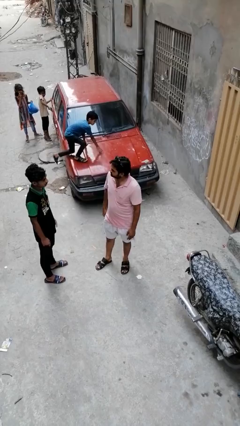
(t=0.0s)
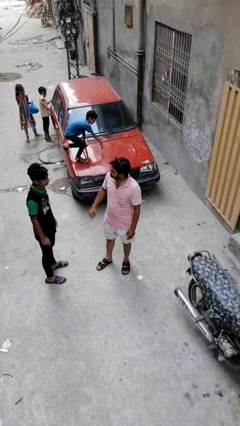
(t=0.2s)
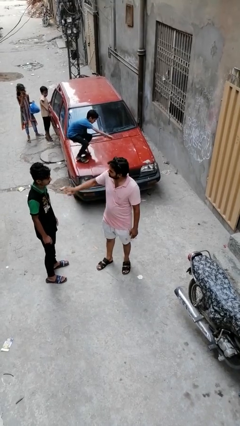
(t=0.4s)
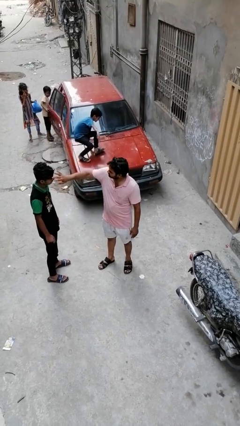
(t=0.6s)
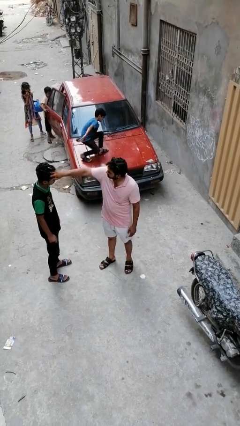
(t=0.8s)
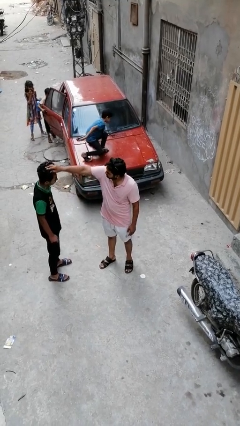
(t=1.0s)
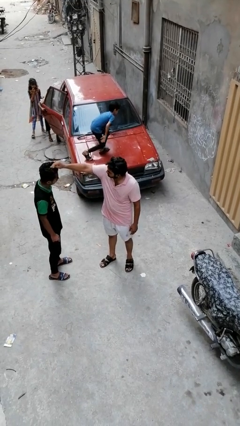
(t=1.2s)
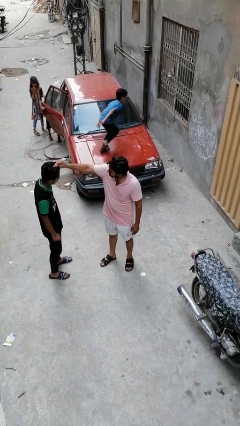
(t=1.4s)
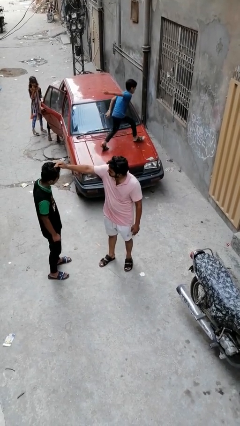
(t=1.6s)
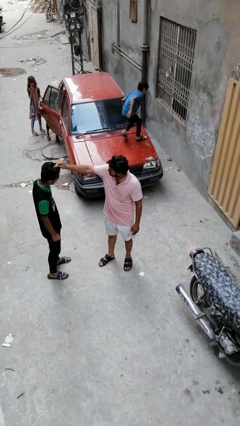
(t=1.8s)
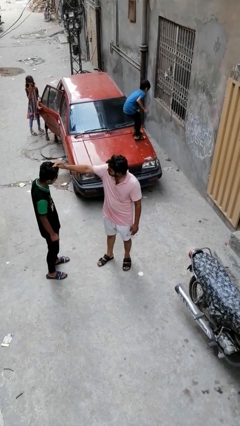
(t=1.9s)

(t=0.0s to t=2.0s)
person grabs person by hair

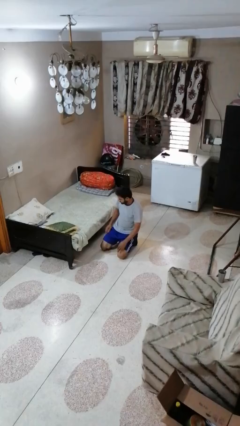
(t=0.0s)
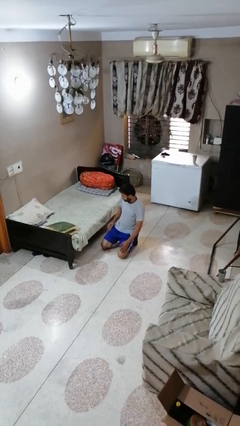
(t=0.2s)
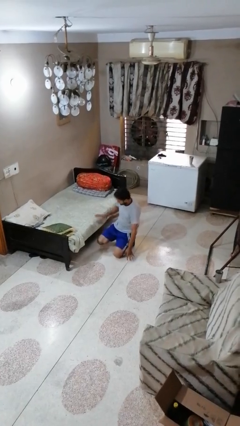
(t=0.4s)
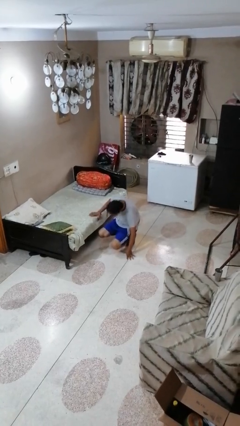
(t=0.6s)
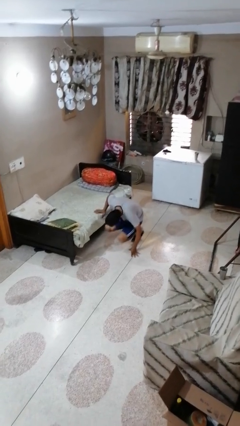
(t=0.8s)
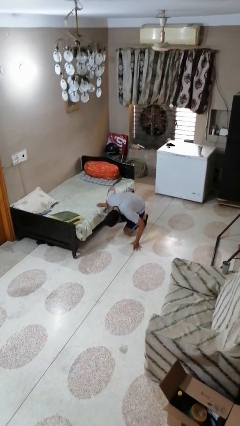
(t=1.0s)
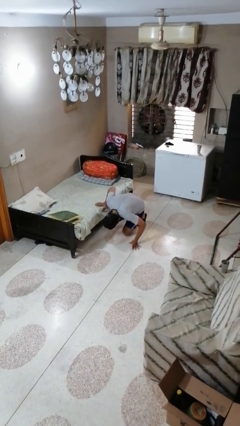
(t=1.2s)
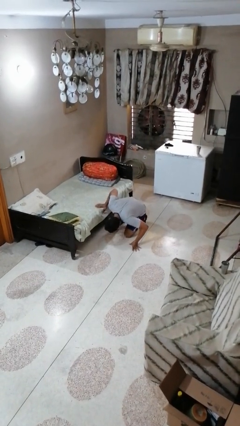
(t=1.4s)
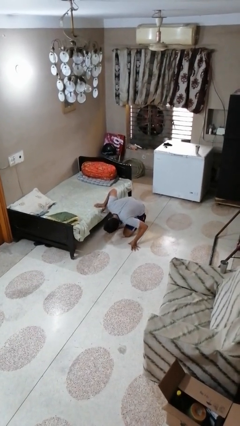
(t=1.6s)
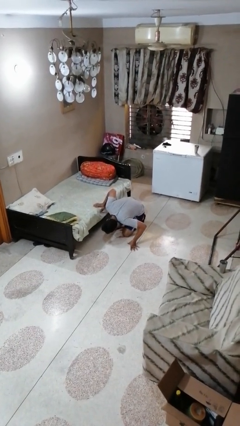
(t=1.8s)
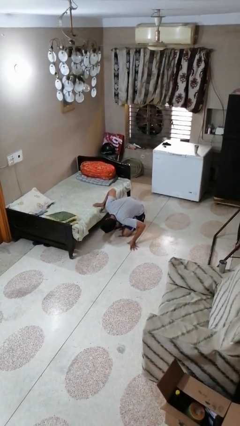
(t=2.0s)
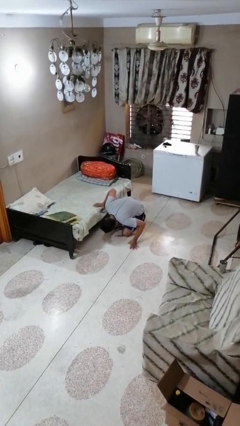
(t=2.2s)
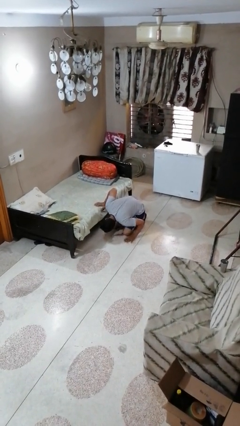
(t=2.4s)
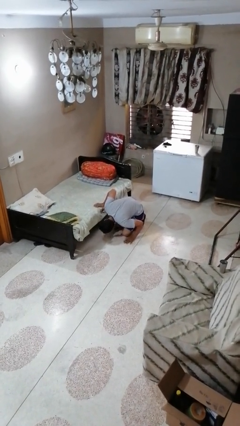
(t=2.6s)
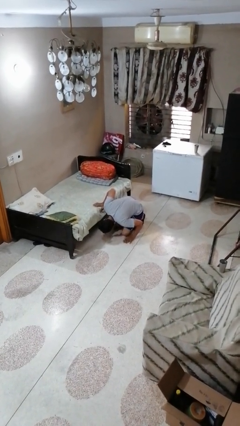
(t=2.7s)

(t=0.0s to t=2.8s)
person searches under bed

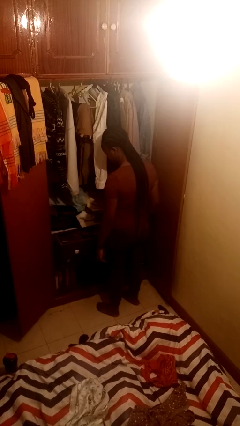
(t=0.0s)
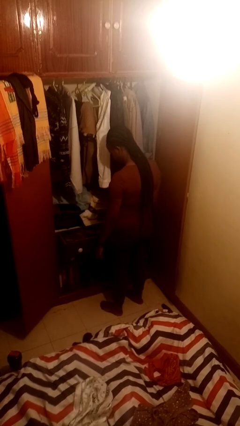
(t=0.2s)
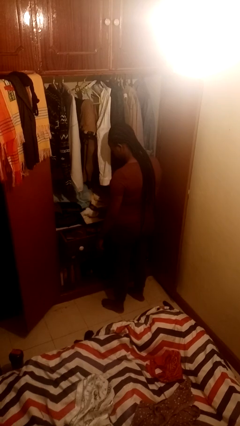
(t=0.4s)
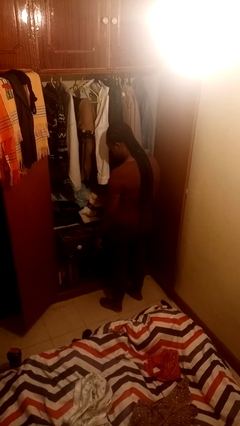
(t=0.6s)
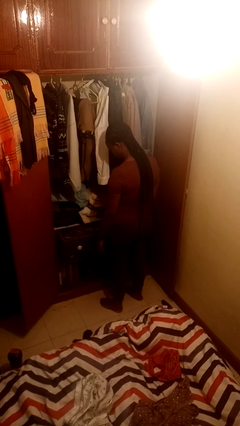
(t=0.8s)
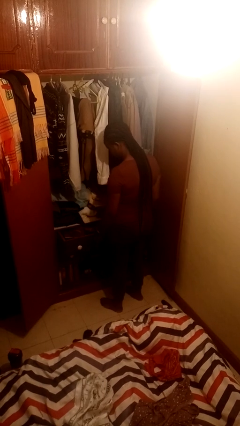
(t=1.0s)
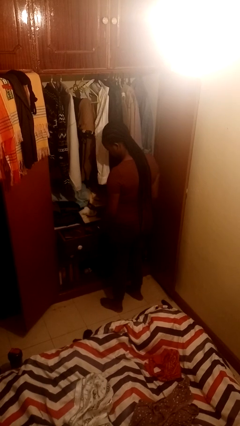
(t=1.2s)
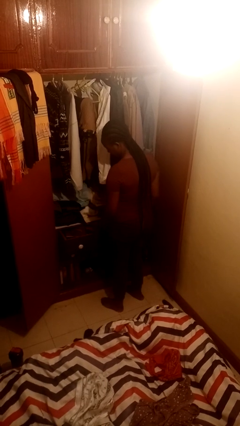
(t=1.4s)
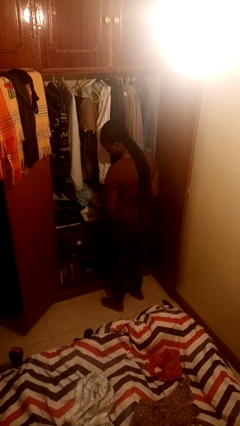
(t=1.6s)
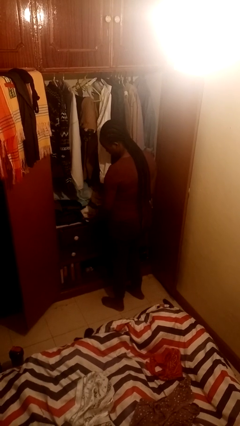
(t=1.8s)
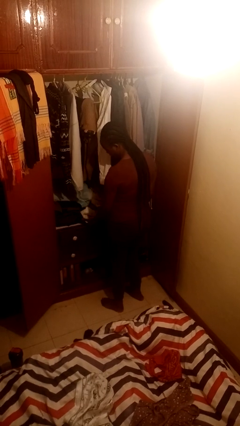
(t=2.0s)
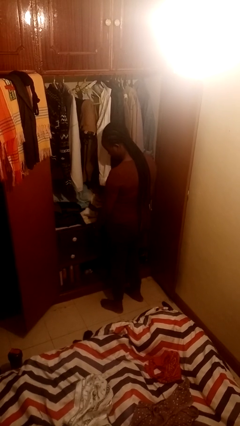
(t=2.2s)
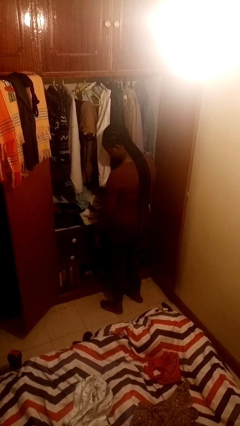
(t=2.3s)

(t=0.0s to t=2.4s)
person closes dresser drawer

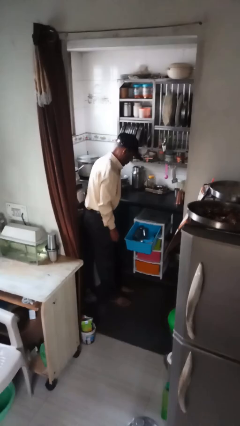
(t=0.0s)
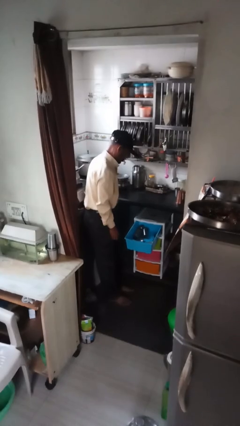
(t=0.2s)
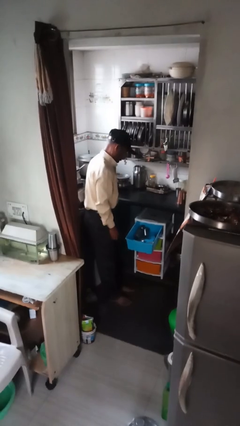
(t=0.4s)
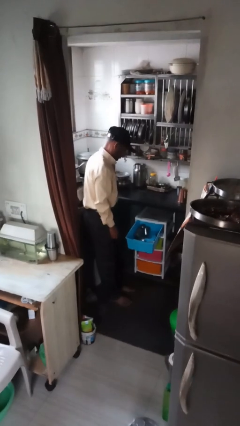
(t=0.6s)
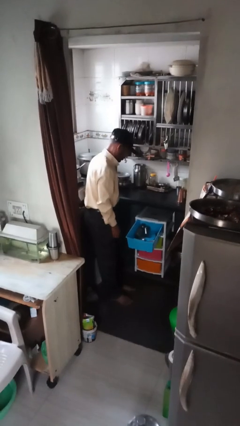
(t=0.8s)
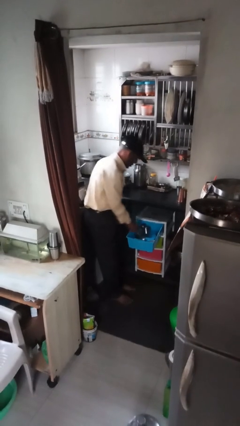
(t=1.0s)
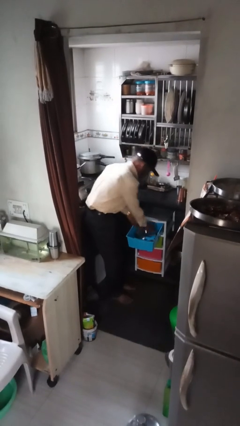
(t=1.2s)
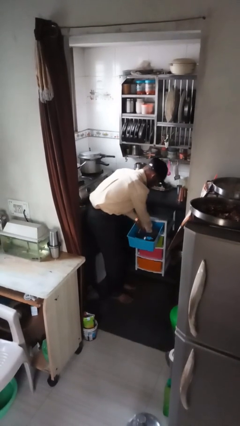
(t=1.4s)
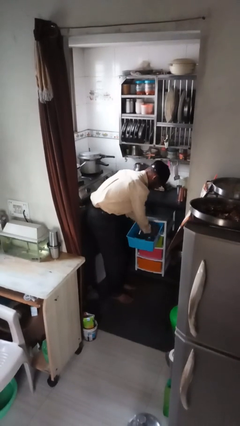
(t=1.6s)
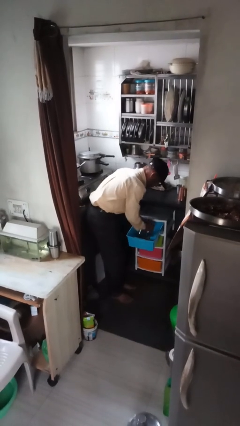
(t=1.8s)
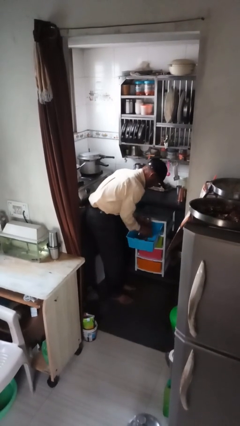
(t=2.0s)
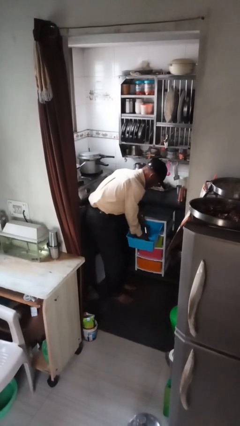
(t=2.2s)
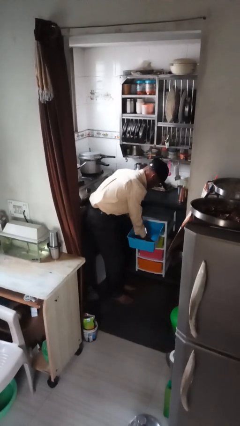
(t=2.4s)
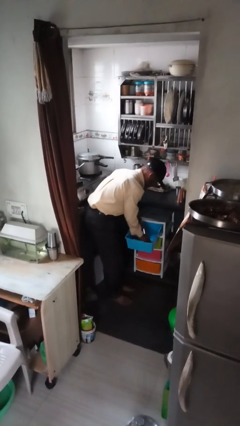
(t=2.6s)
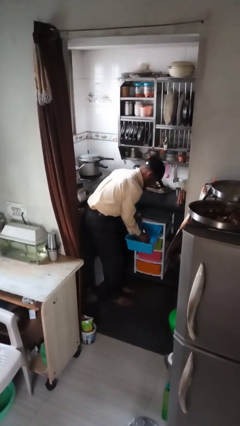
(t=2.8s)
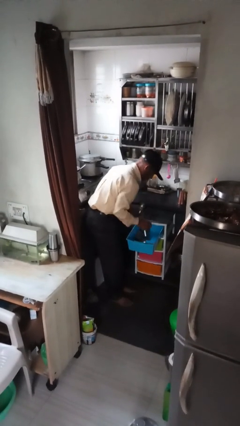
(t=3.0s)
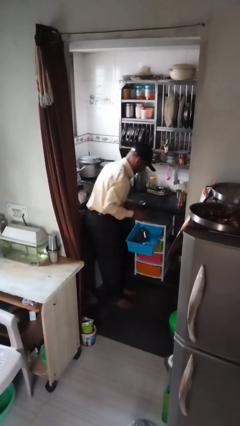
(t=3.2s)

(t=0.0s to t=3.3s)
person takes object from kitchen drawer

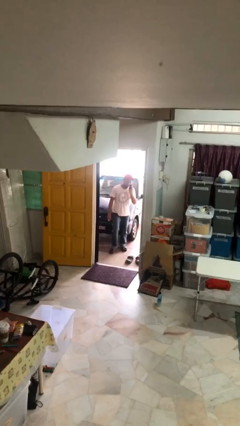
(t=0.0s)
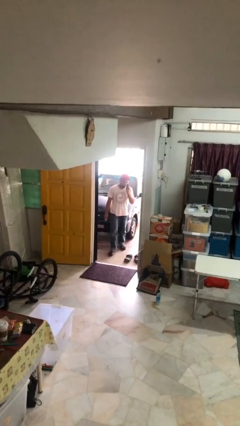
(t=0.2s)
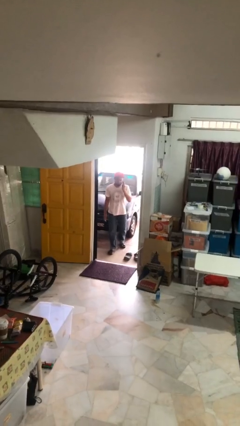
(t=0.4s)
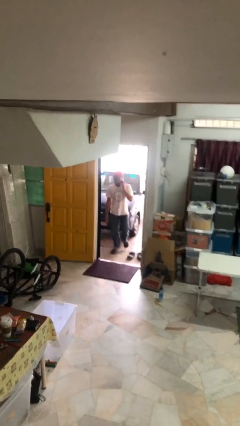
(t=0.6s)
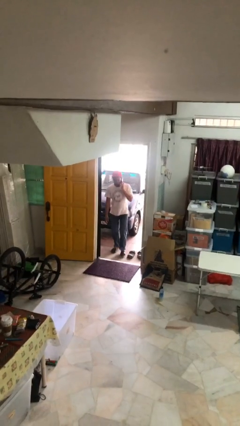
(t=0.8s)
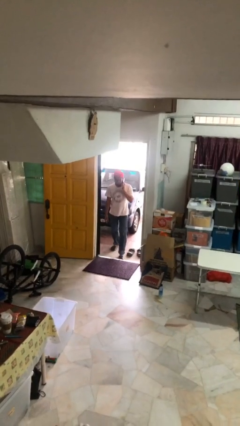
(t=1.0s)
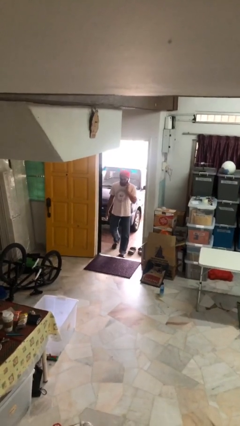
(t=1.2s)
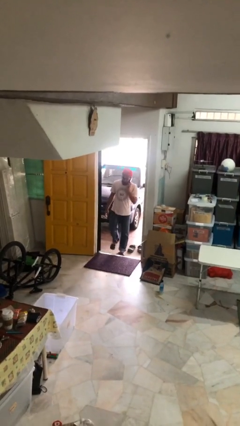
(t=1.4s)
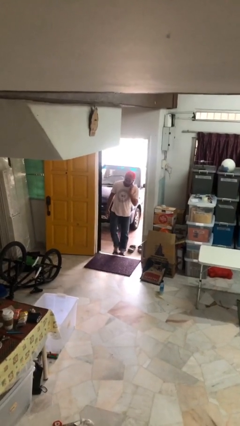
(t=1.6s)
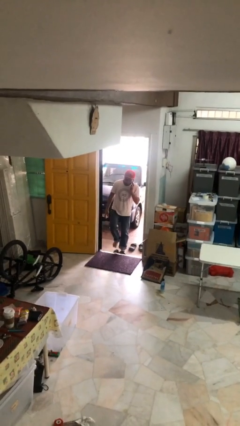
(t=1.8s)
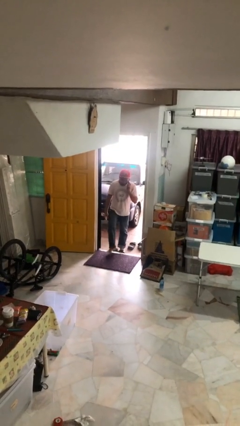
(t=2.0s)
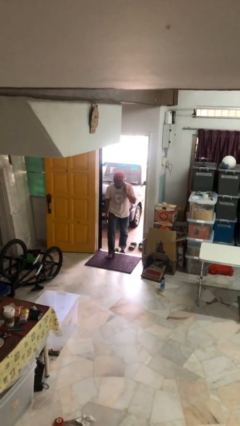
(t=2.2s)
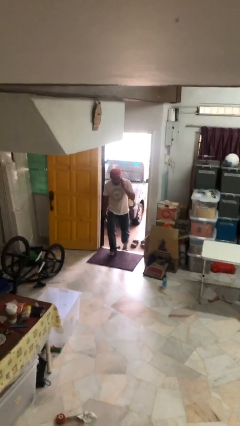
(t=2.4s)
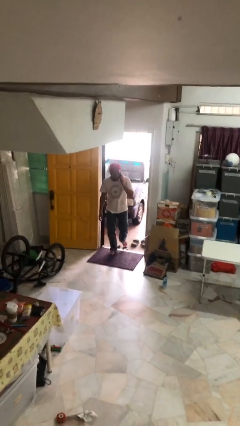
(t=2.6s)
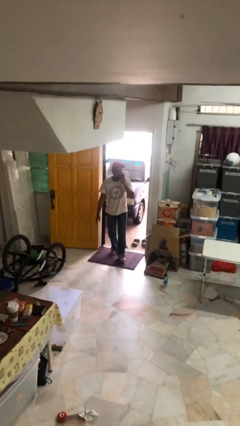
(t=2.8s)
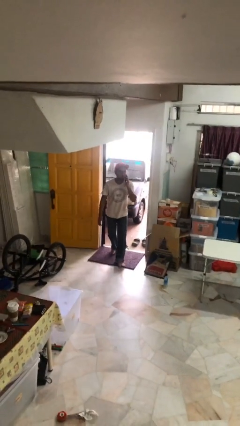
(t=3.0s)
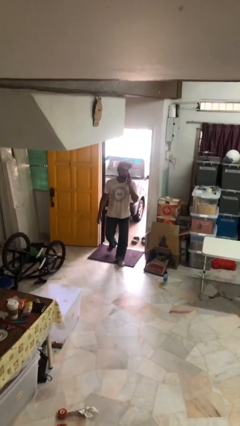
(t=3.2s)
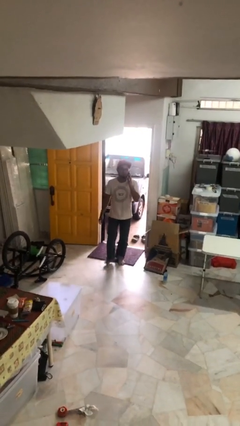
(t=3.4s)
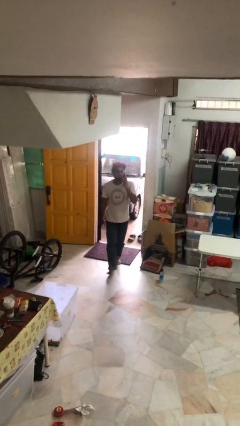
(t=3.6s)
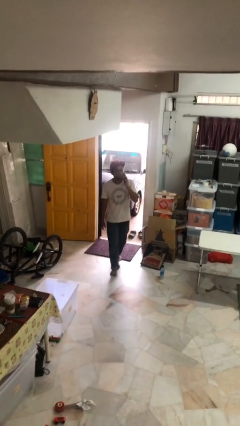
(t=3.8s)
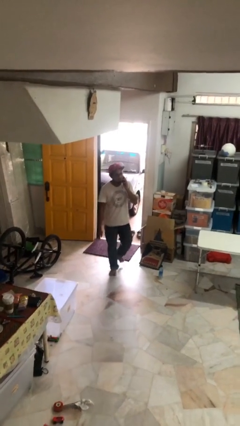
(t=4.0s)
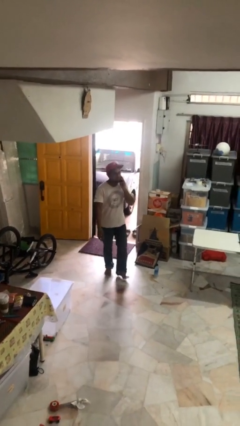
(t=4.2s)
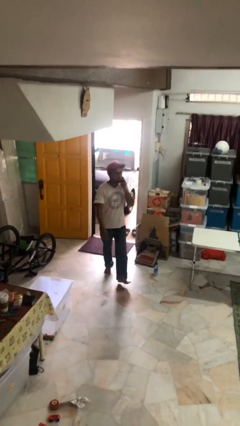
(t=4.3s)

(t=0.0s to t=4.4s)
person enters scene through structure

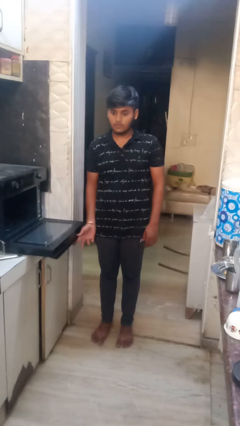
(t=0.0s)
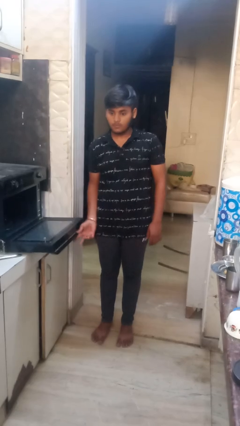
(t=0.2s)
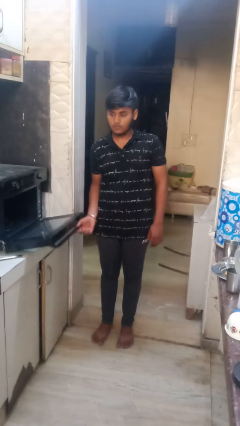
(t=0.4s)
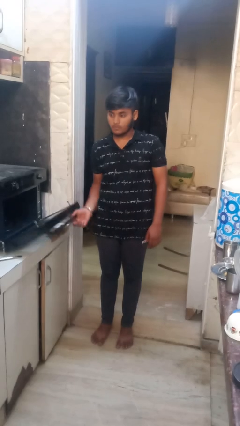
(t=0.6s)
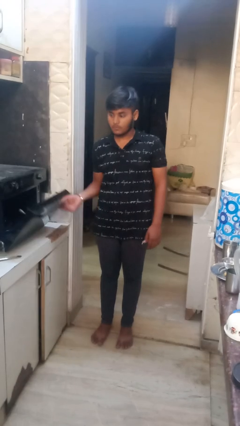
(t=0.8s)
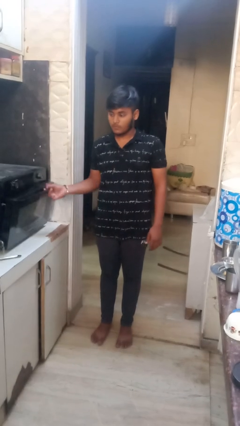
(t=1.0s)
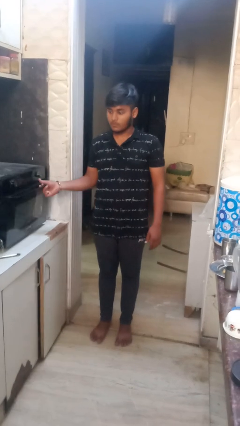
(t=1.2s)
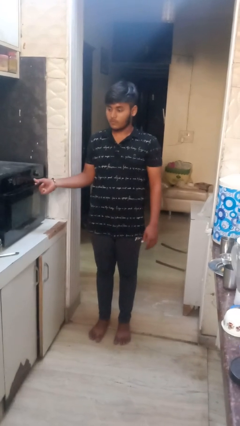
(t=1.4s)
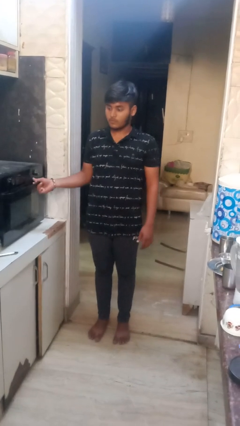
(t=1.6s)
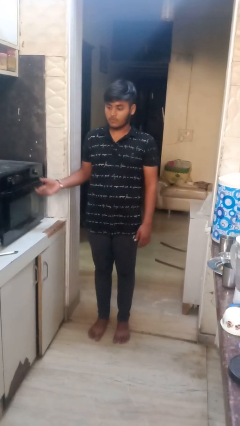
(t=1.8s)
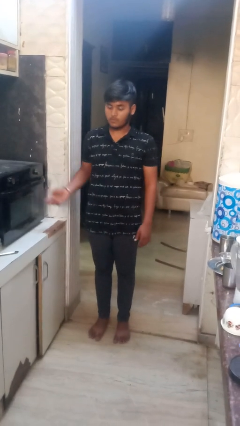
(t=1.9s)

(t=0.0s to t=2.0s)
person closes oven door

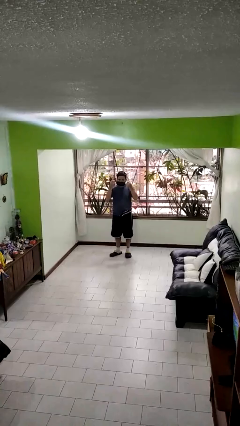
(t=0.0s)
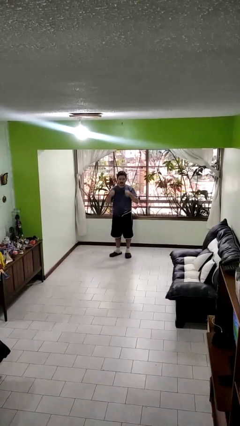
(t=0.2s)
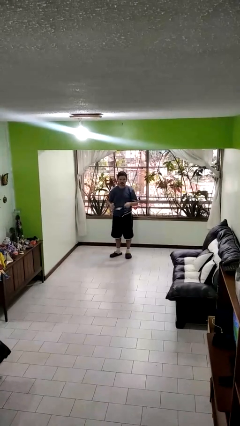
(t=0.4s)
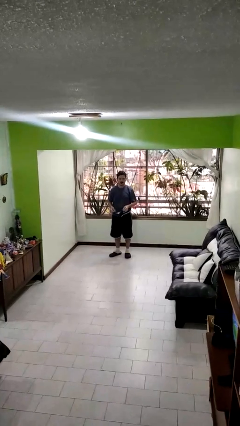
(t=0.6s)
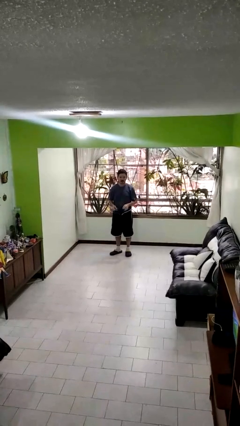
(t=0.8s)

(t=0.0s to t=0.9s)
person takes off facemask
